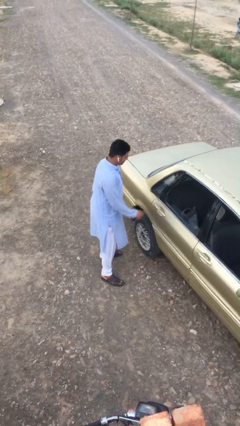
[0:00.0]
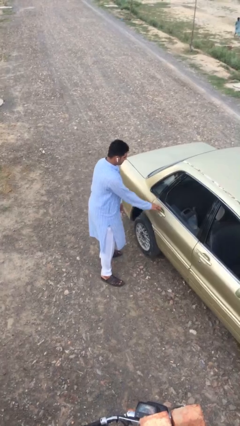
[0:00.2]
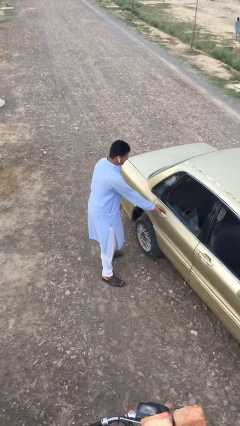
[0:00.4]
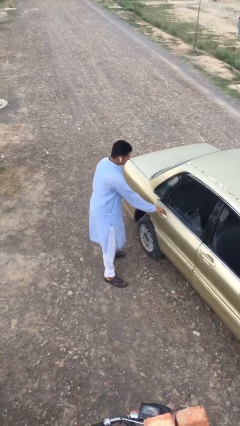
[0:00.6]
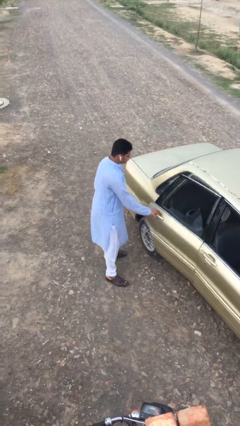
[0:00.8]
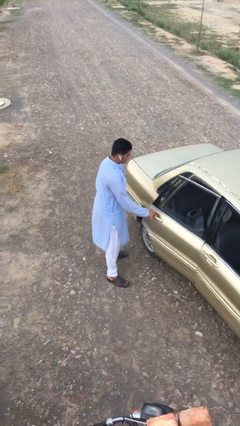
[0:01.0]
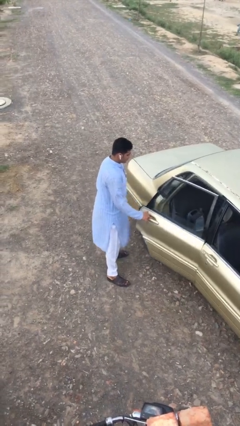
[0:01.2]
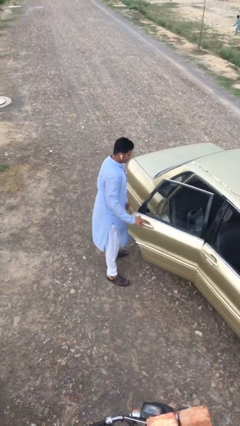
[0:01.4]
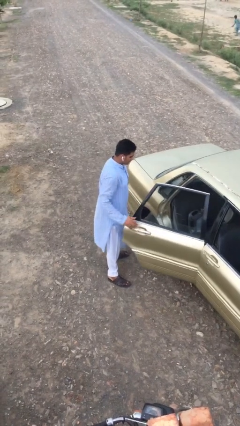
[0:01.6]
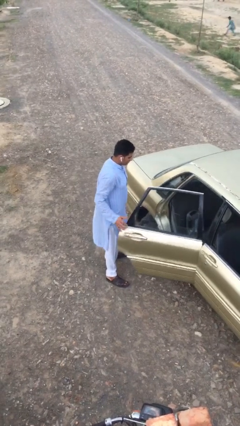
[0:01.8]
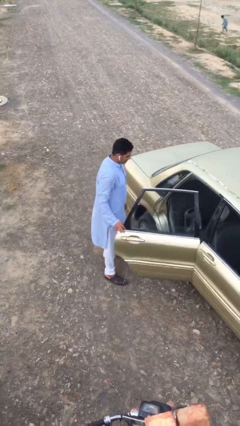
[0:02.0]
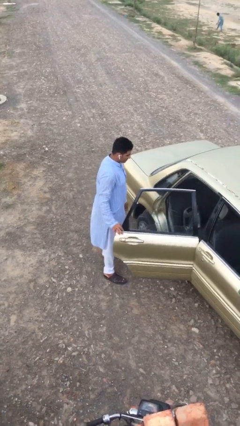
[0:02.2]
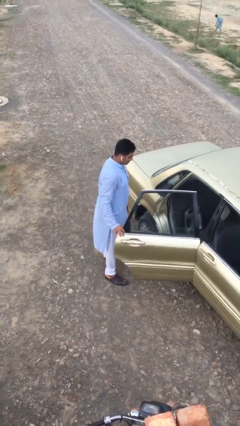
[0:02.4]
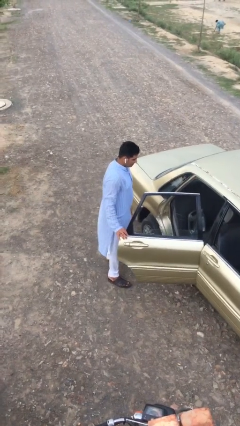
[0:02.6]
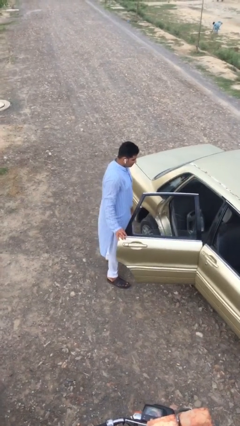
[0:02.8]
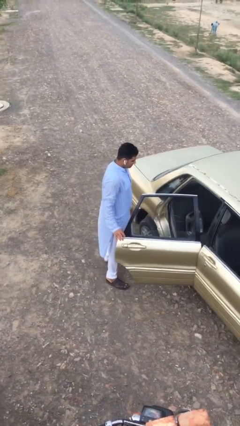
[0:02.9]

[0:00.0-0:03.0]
person opens car door

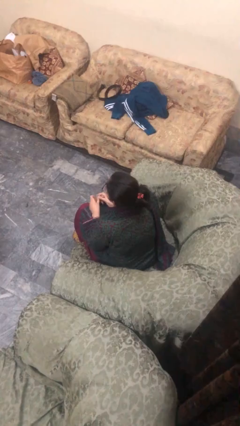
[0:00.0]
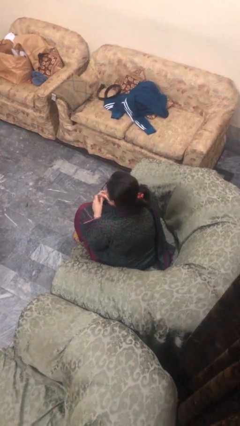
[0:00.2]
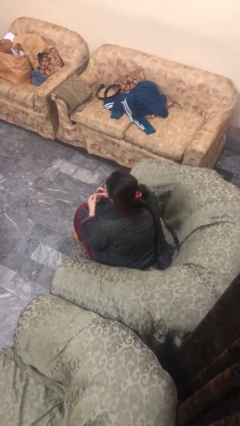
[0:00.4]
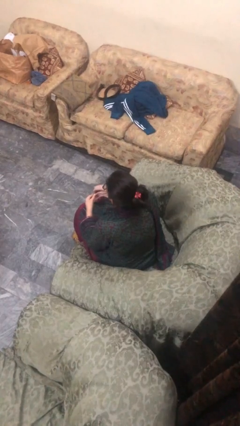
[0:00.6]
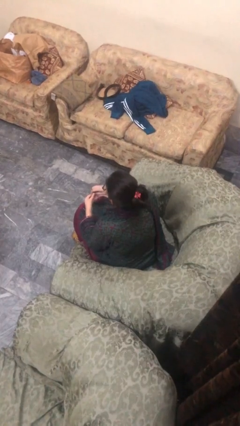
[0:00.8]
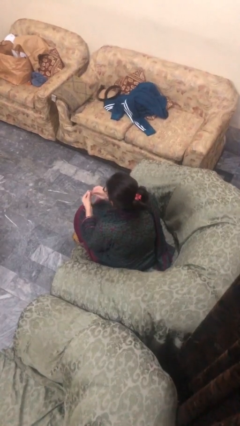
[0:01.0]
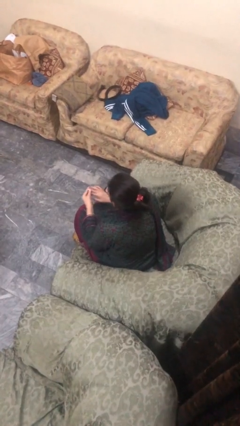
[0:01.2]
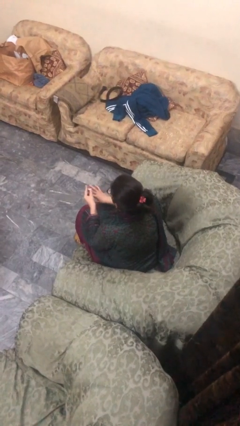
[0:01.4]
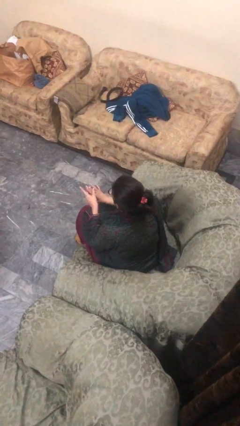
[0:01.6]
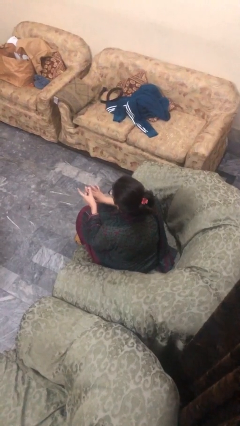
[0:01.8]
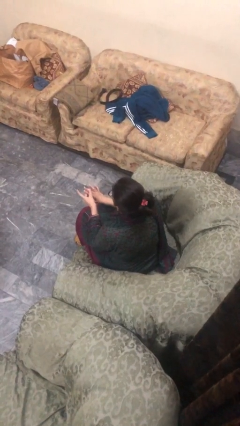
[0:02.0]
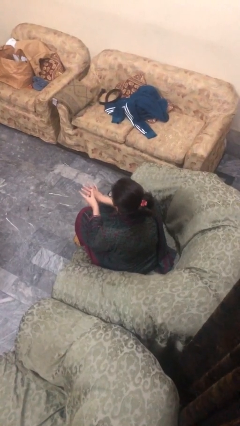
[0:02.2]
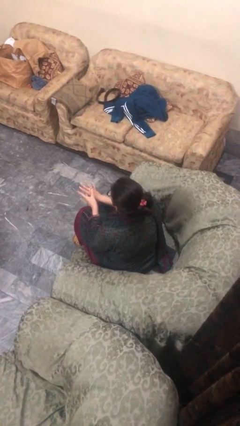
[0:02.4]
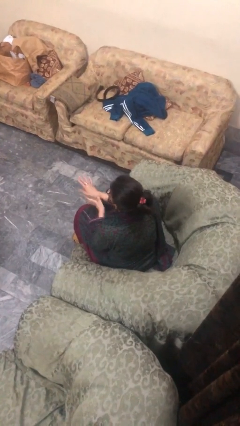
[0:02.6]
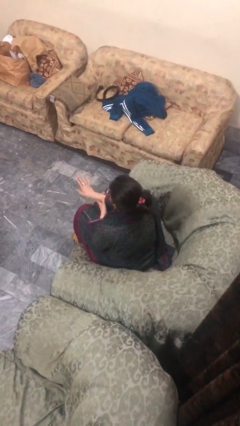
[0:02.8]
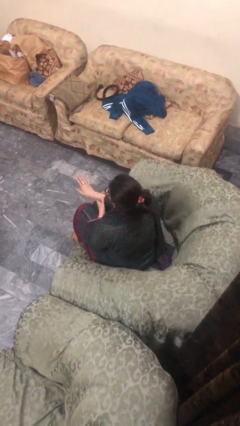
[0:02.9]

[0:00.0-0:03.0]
person puts on ring

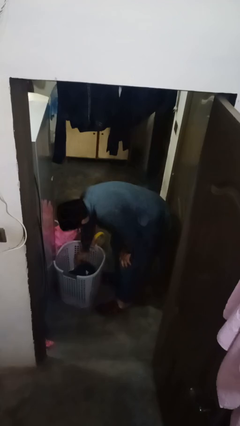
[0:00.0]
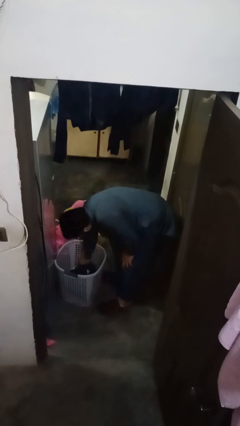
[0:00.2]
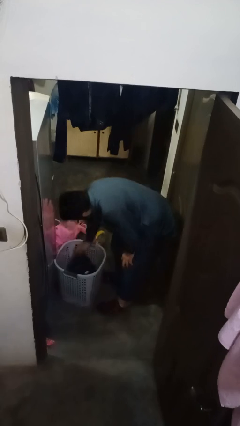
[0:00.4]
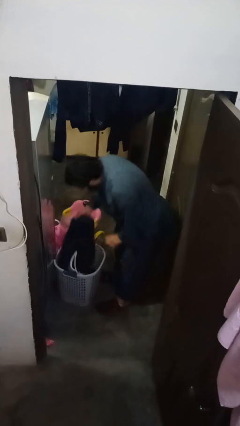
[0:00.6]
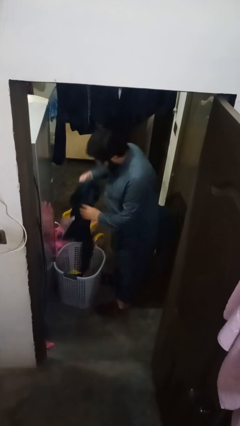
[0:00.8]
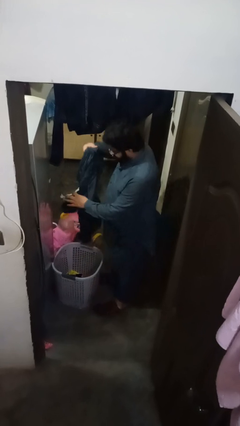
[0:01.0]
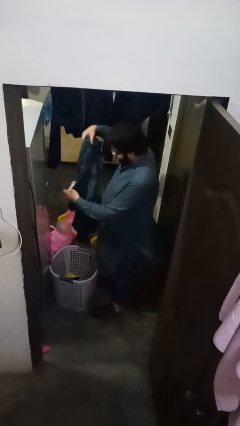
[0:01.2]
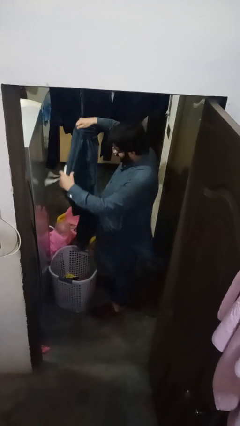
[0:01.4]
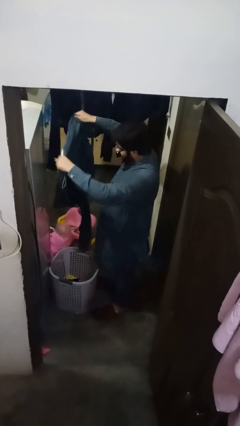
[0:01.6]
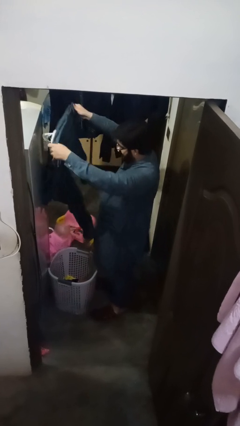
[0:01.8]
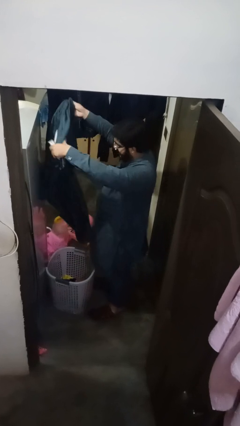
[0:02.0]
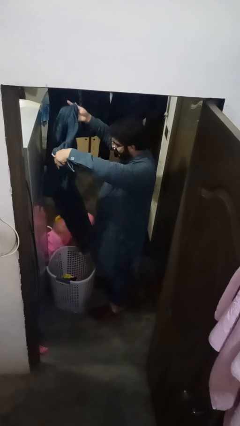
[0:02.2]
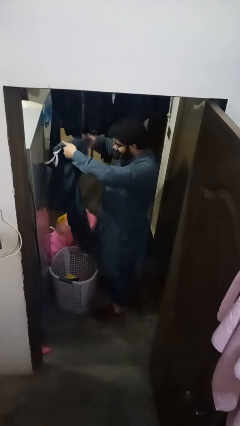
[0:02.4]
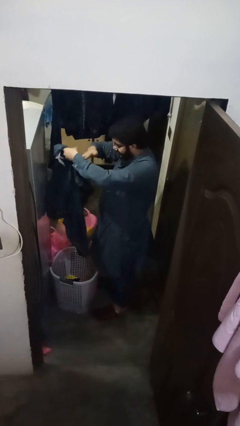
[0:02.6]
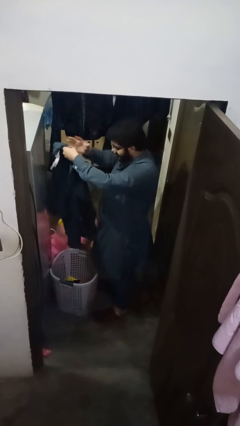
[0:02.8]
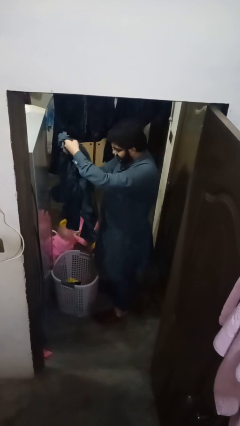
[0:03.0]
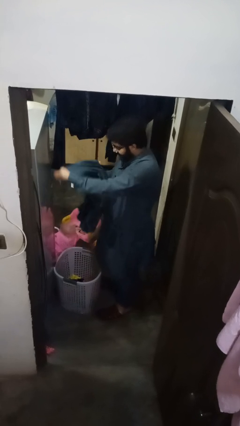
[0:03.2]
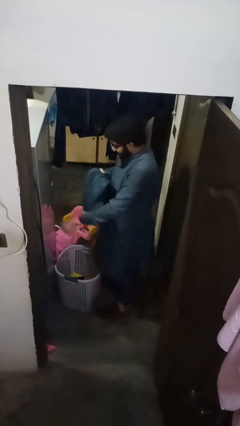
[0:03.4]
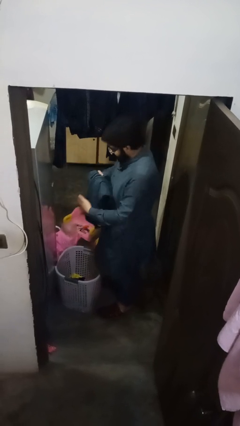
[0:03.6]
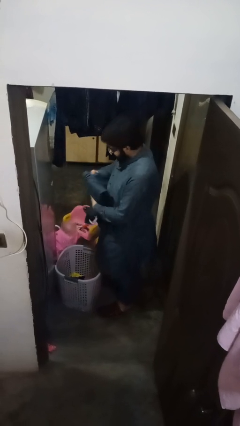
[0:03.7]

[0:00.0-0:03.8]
person folds pants

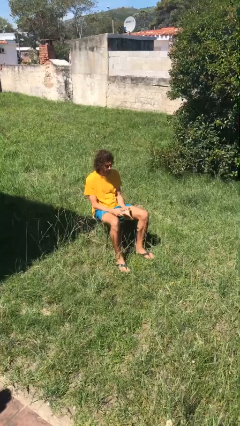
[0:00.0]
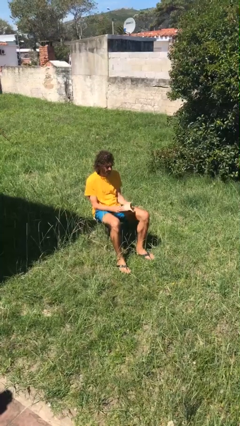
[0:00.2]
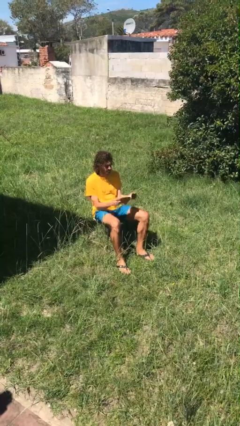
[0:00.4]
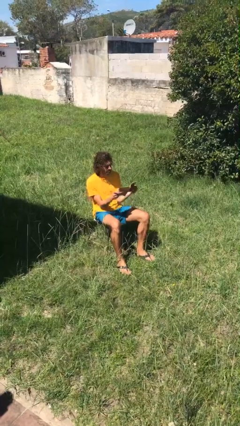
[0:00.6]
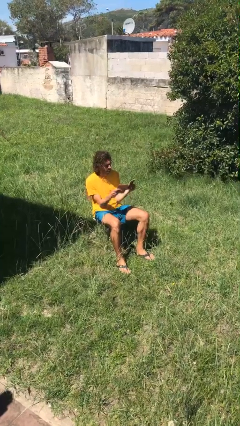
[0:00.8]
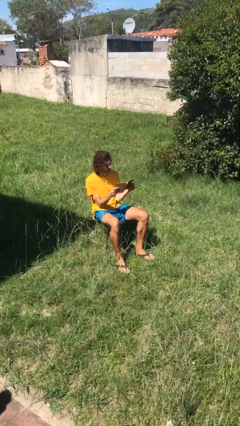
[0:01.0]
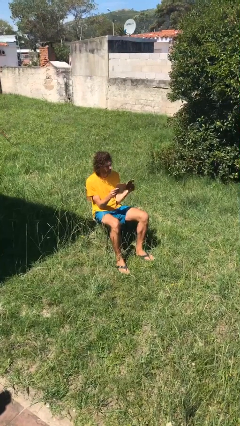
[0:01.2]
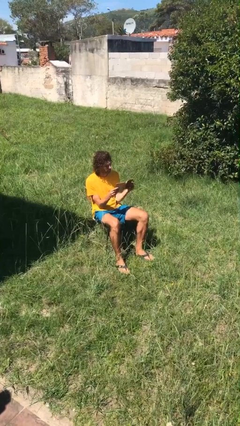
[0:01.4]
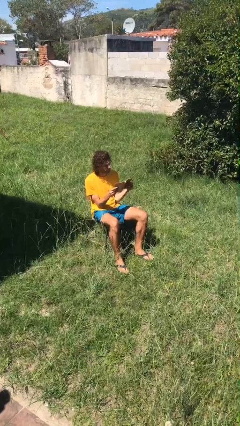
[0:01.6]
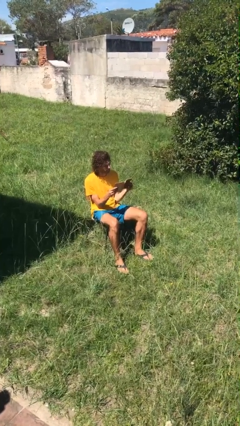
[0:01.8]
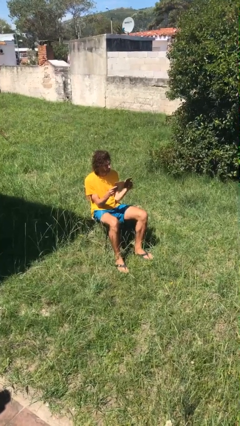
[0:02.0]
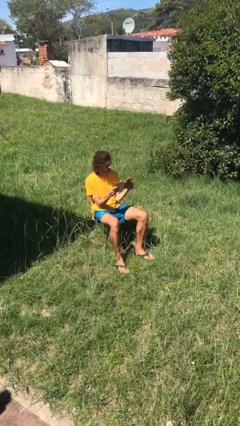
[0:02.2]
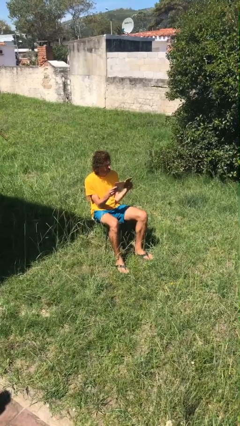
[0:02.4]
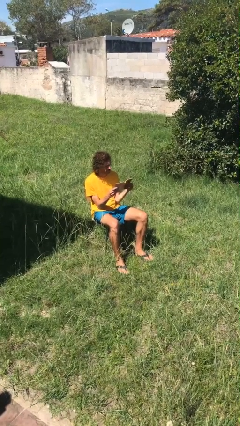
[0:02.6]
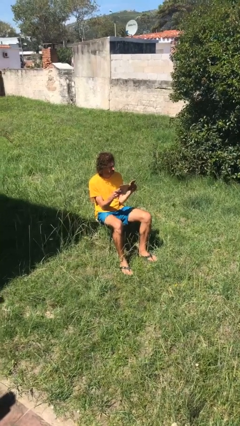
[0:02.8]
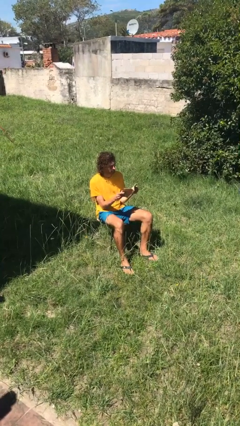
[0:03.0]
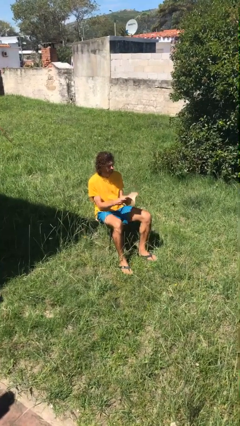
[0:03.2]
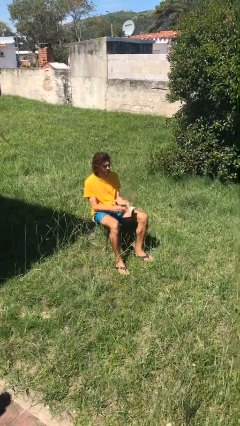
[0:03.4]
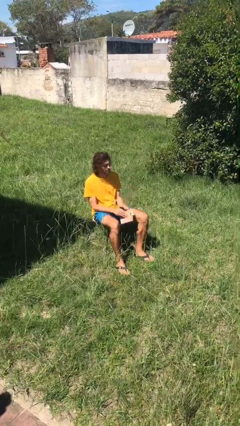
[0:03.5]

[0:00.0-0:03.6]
person reads document

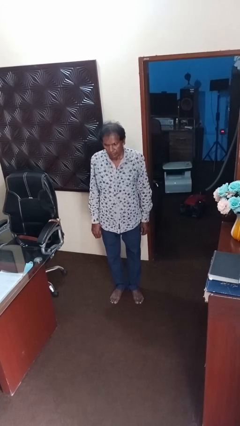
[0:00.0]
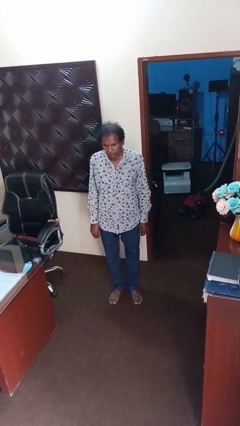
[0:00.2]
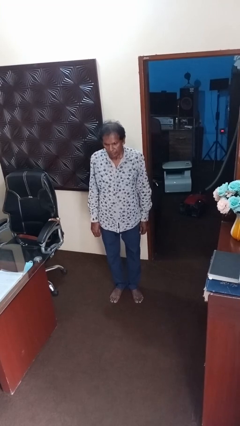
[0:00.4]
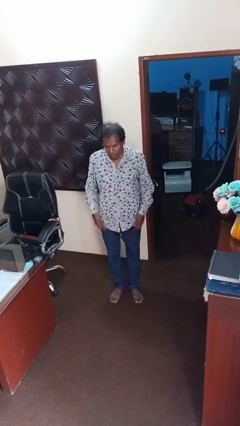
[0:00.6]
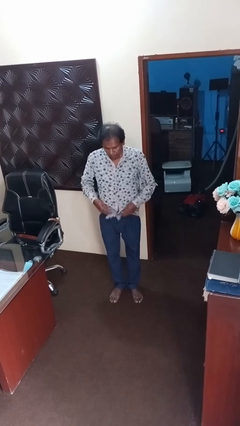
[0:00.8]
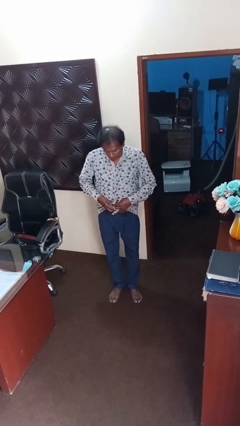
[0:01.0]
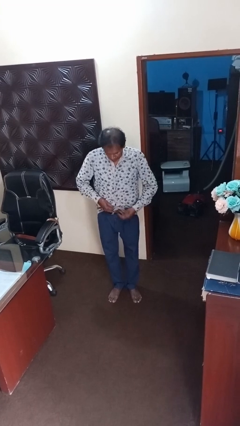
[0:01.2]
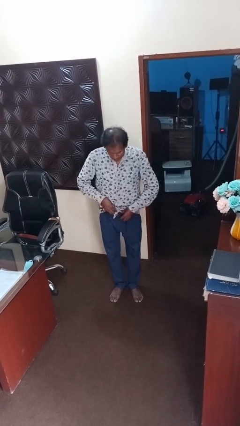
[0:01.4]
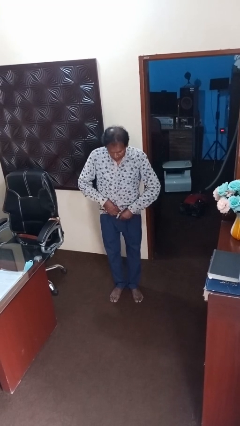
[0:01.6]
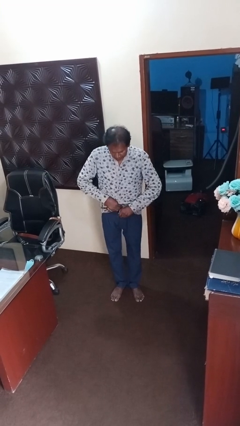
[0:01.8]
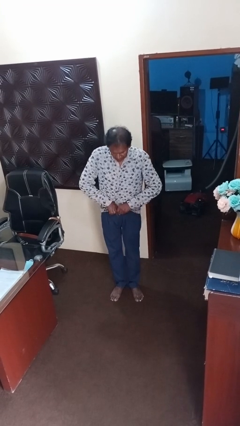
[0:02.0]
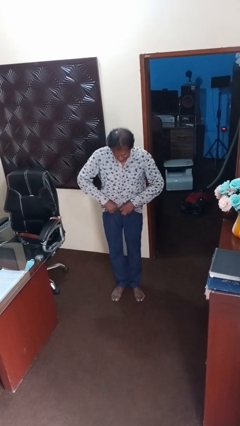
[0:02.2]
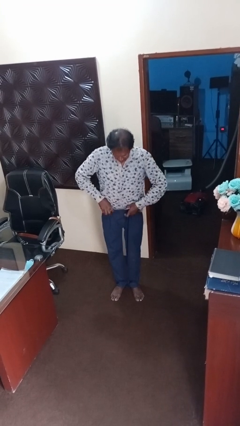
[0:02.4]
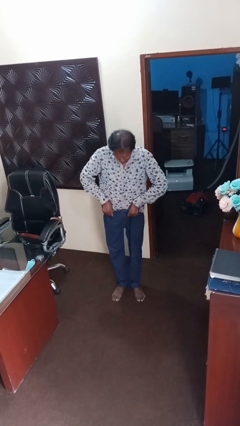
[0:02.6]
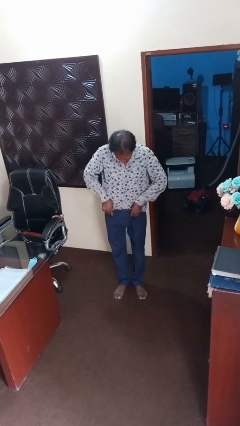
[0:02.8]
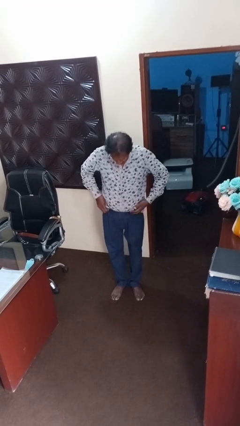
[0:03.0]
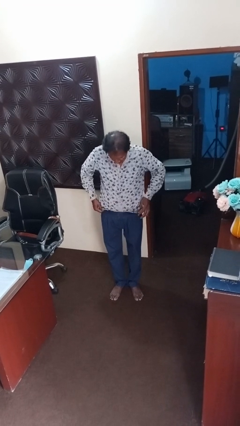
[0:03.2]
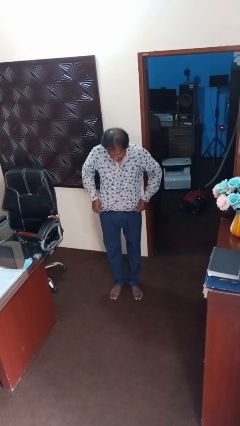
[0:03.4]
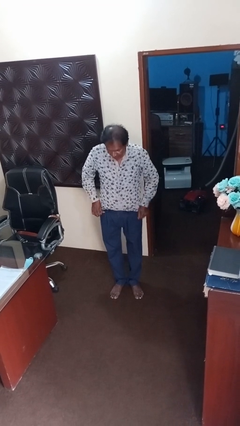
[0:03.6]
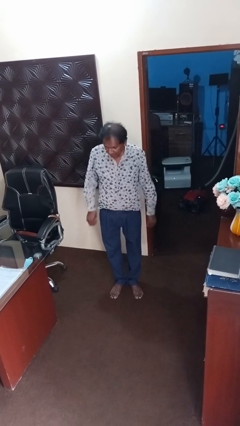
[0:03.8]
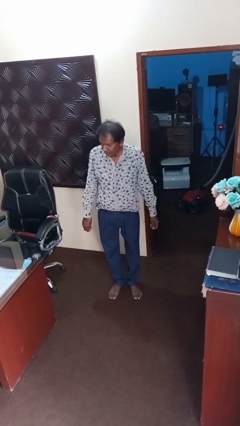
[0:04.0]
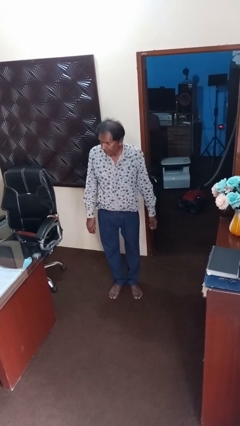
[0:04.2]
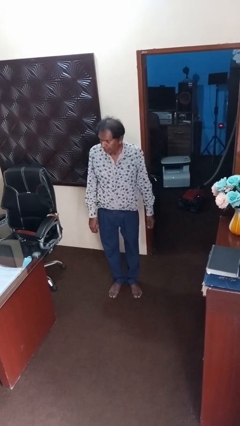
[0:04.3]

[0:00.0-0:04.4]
person tucks in shirt
